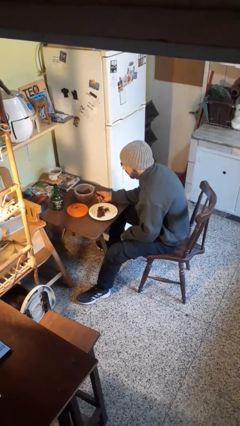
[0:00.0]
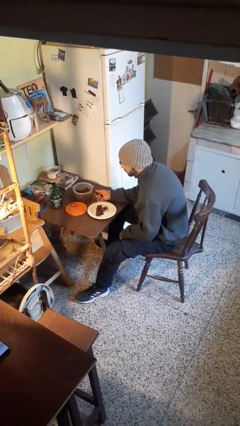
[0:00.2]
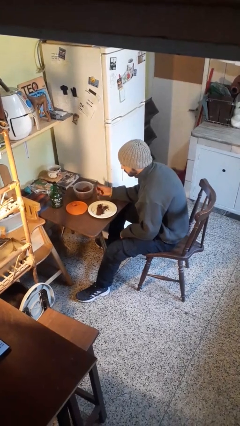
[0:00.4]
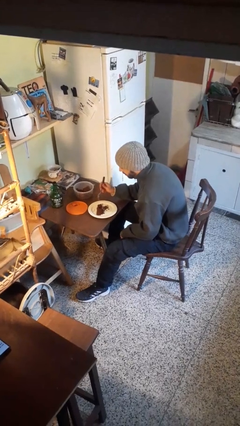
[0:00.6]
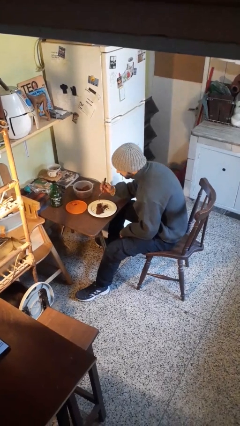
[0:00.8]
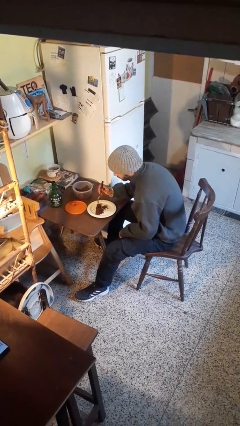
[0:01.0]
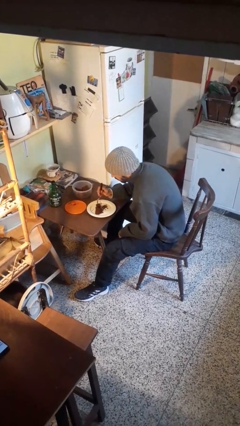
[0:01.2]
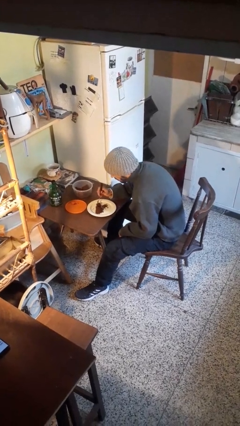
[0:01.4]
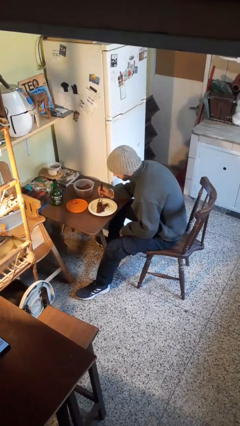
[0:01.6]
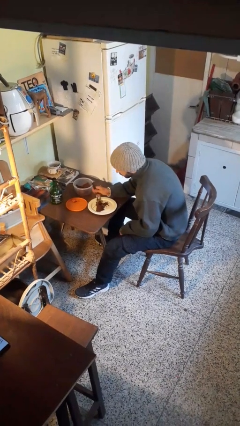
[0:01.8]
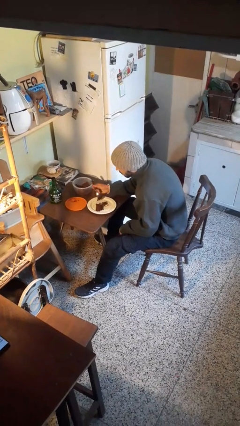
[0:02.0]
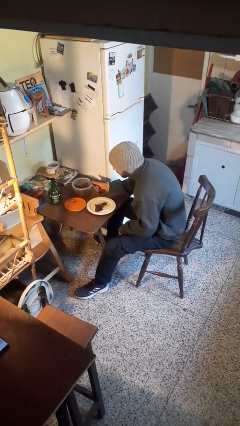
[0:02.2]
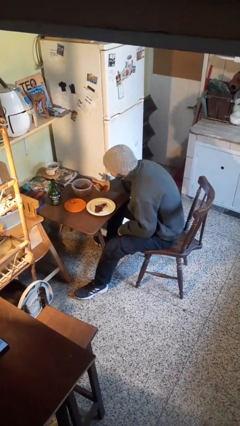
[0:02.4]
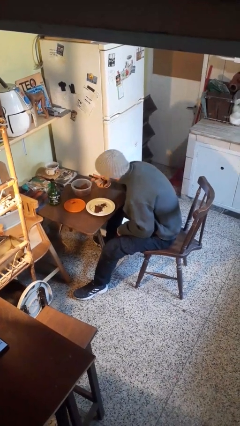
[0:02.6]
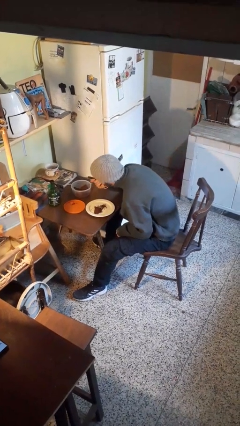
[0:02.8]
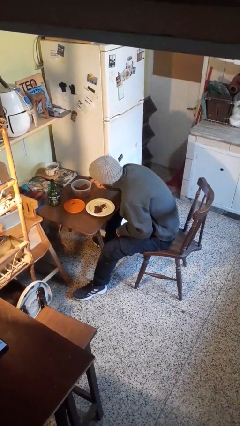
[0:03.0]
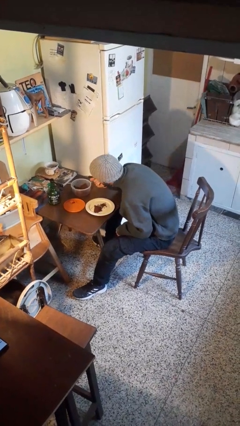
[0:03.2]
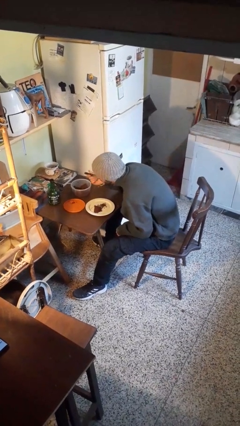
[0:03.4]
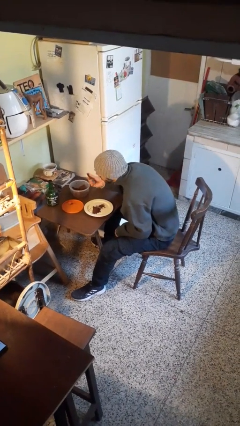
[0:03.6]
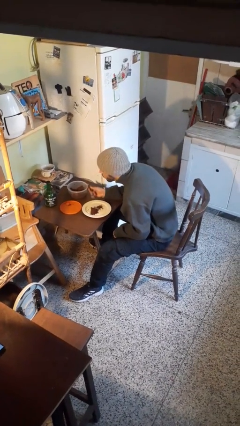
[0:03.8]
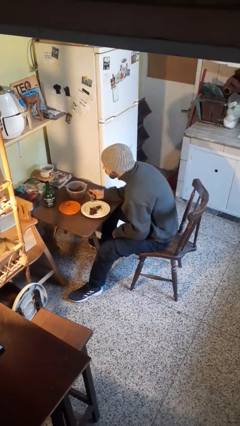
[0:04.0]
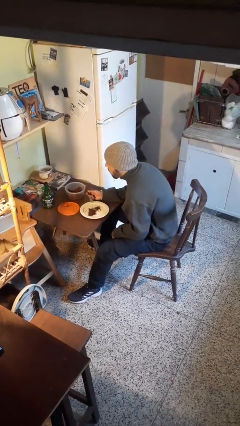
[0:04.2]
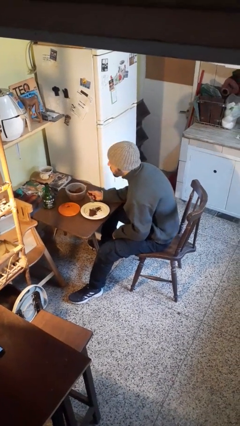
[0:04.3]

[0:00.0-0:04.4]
person eats with utensil

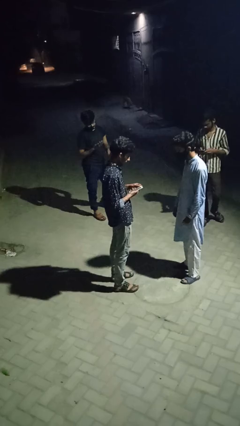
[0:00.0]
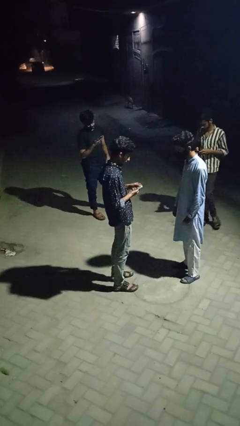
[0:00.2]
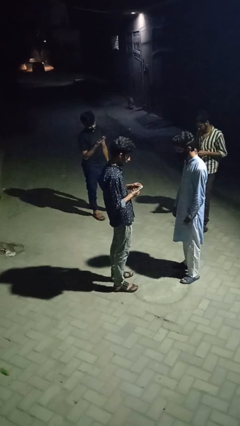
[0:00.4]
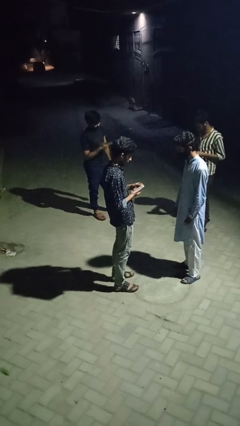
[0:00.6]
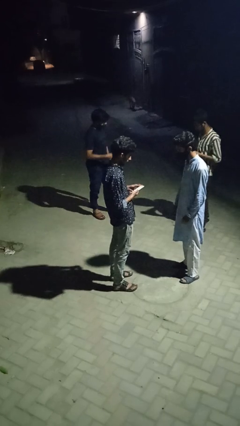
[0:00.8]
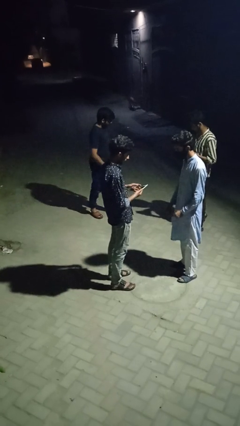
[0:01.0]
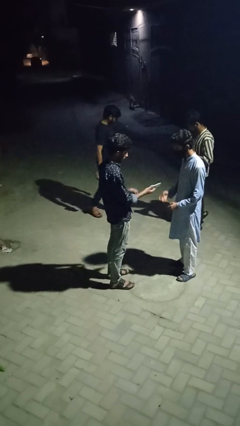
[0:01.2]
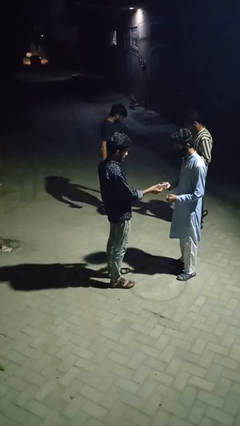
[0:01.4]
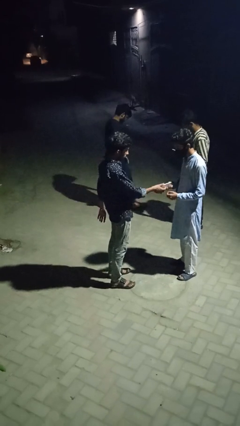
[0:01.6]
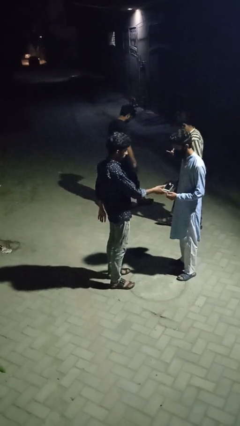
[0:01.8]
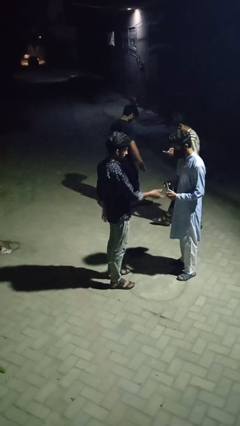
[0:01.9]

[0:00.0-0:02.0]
person transfers object to person

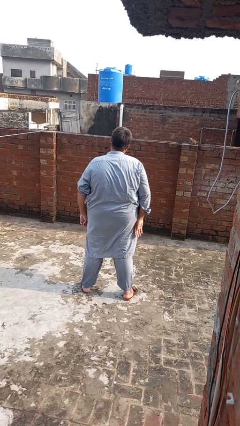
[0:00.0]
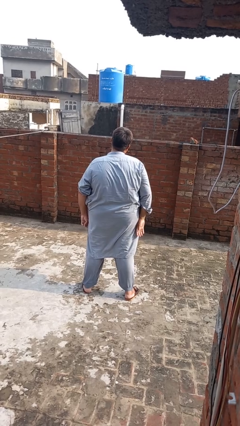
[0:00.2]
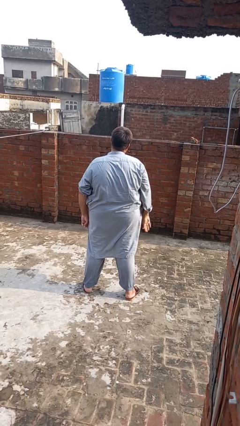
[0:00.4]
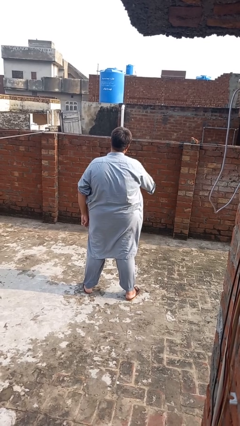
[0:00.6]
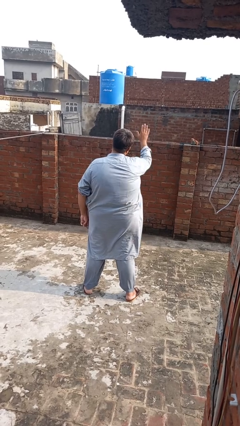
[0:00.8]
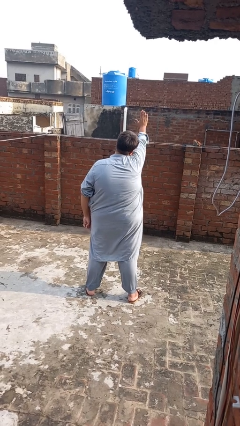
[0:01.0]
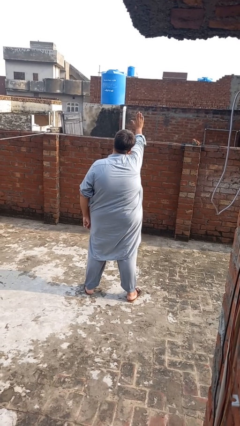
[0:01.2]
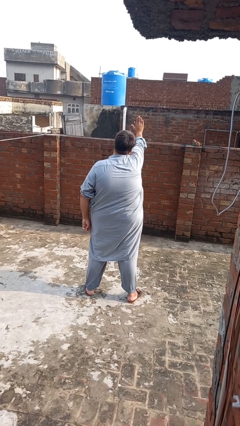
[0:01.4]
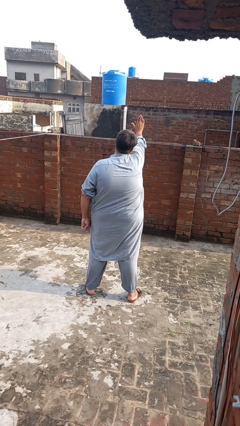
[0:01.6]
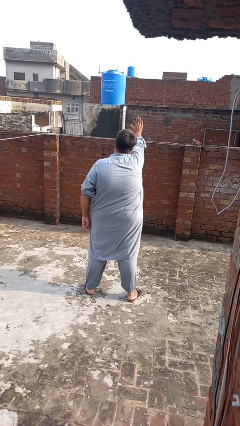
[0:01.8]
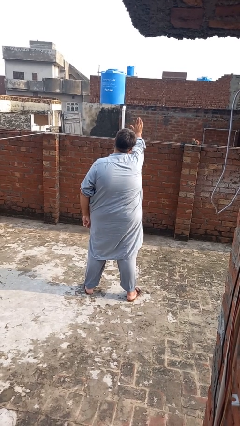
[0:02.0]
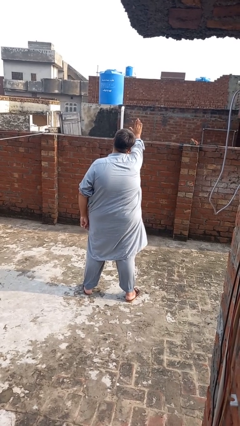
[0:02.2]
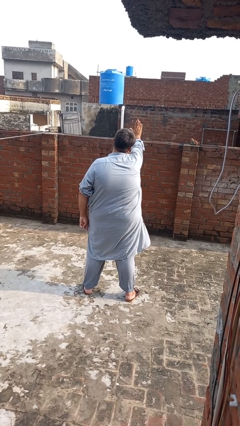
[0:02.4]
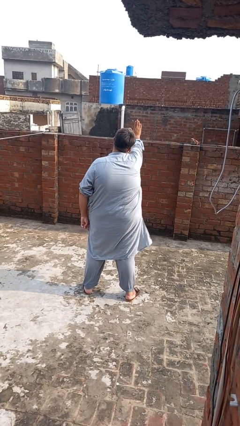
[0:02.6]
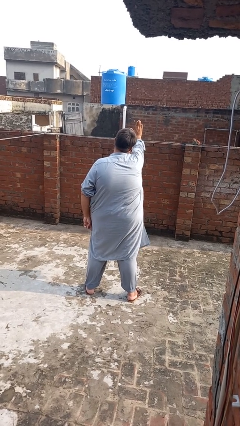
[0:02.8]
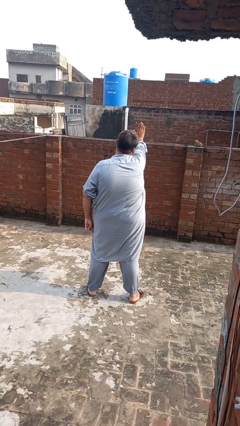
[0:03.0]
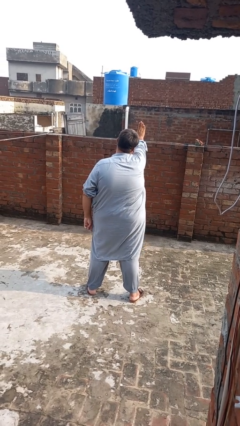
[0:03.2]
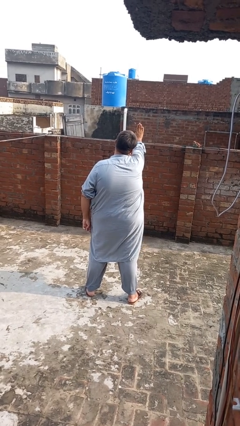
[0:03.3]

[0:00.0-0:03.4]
person gestures stop
